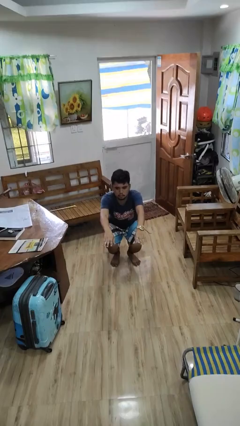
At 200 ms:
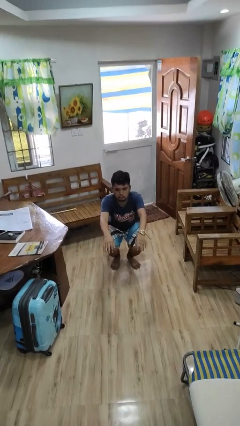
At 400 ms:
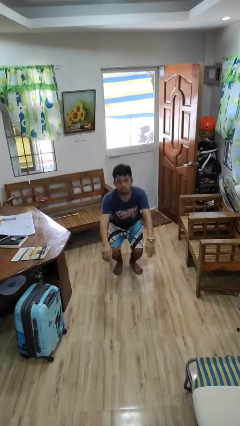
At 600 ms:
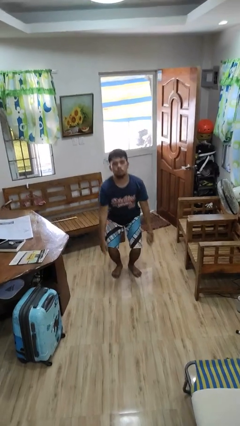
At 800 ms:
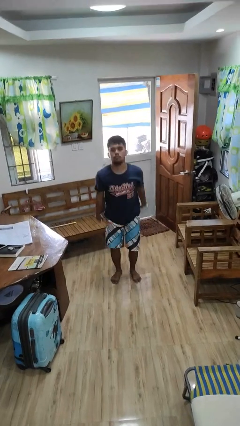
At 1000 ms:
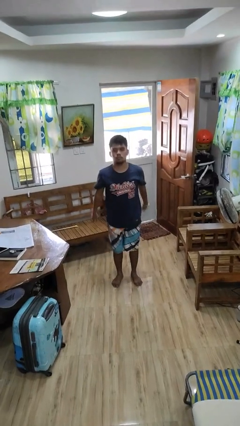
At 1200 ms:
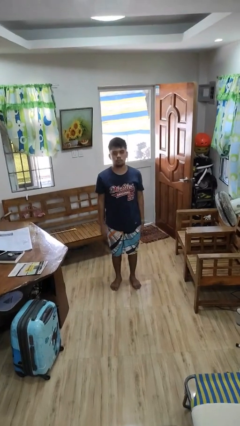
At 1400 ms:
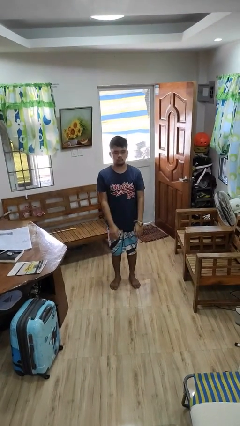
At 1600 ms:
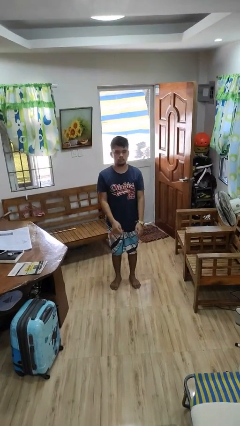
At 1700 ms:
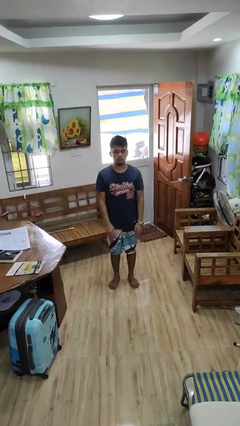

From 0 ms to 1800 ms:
person stands up

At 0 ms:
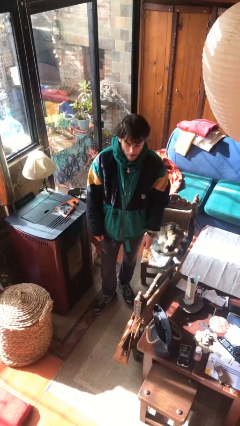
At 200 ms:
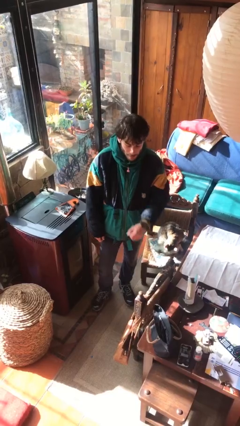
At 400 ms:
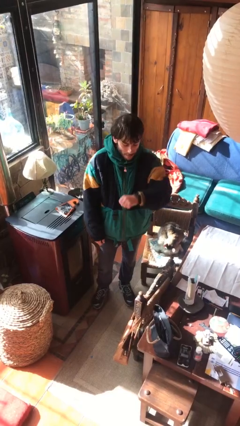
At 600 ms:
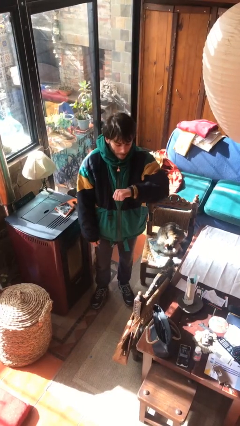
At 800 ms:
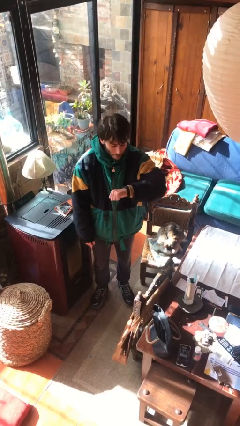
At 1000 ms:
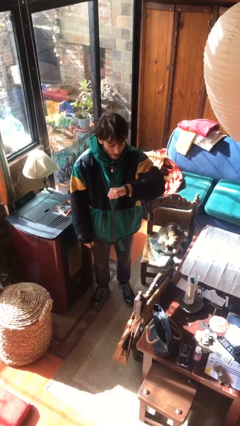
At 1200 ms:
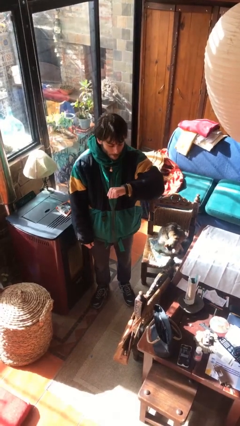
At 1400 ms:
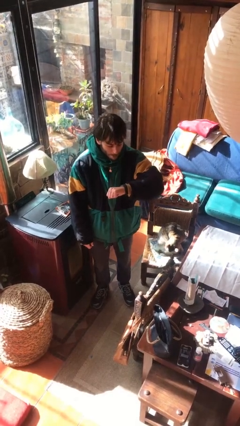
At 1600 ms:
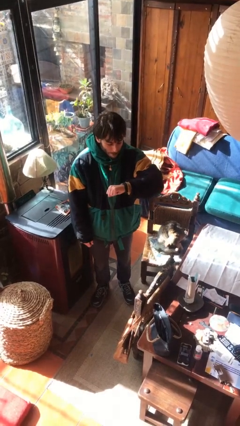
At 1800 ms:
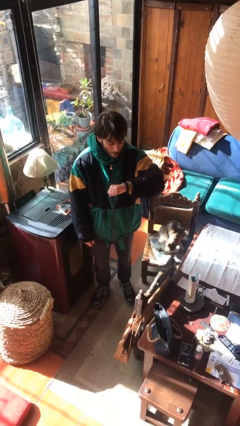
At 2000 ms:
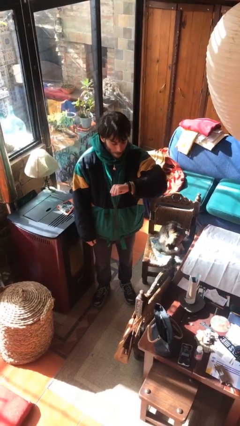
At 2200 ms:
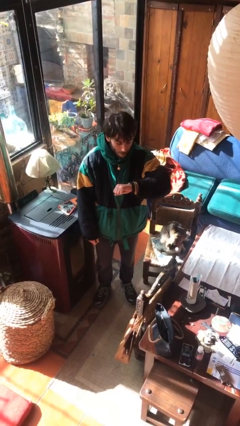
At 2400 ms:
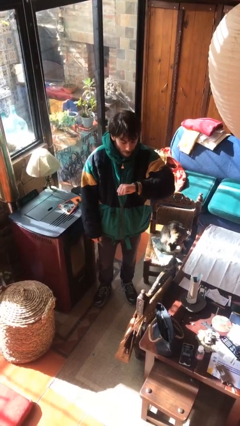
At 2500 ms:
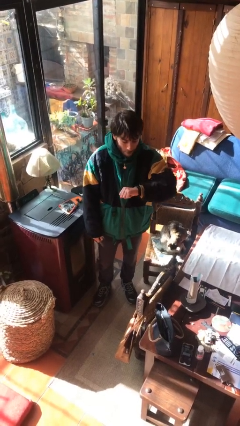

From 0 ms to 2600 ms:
person looks at wristwatch

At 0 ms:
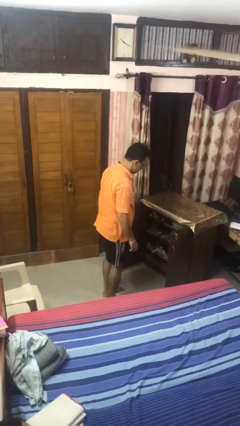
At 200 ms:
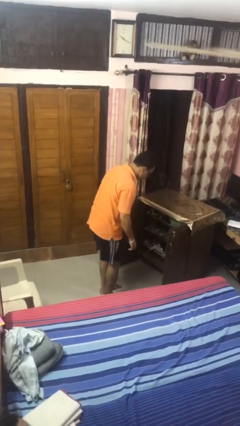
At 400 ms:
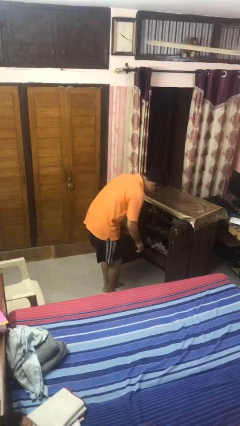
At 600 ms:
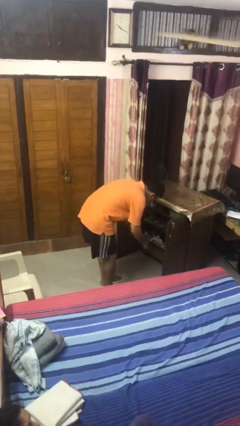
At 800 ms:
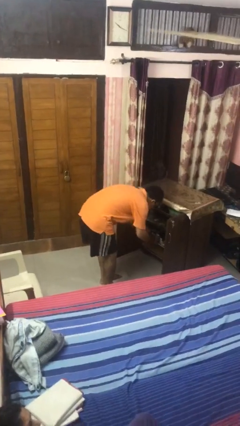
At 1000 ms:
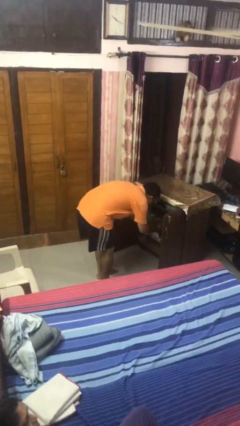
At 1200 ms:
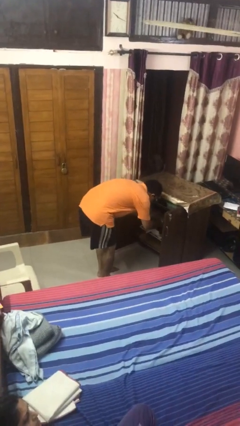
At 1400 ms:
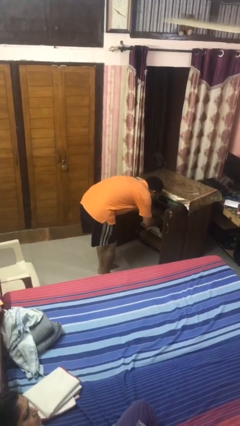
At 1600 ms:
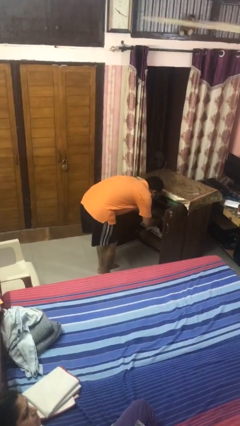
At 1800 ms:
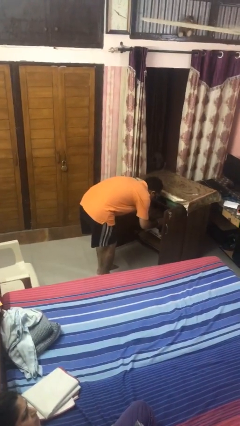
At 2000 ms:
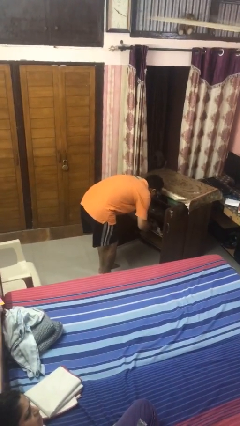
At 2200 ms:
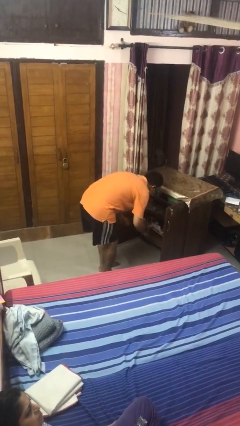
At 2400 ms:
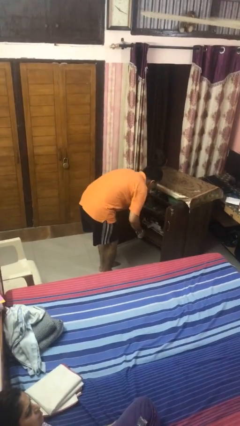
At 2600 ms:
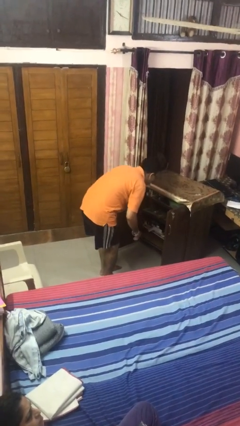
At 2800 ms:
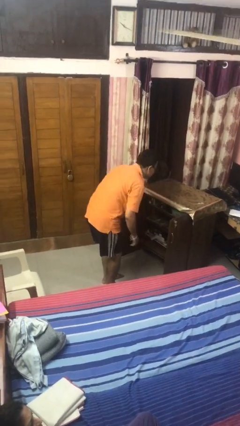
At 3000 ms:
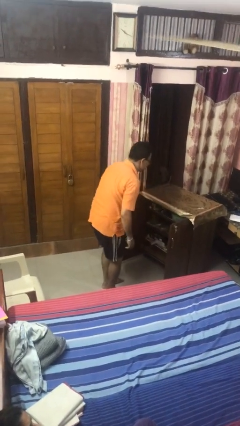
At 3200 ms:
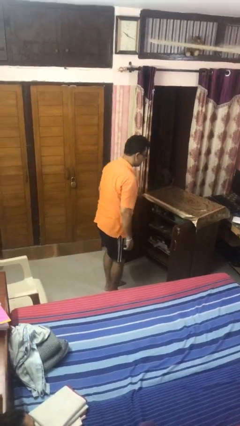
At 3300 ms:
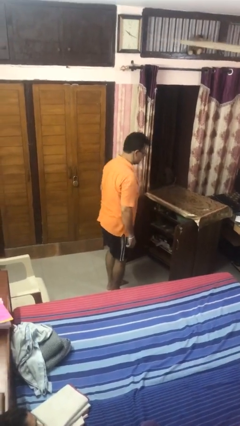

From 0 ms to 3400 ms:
person searches in cabinet

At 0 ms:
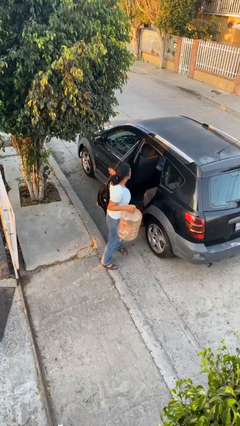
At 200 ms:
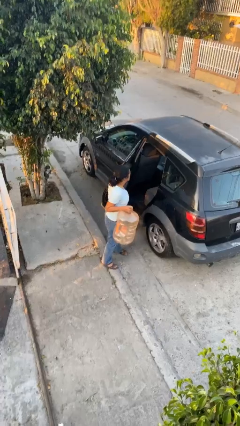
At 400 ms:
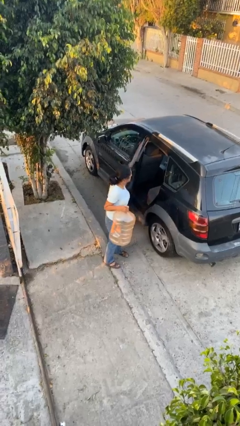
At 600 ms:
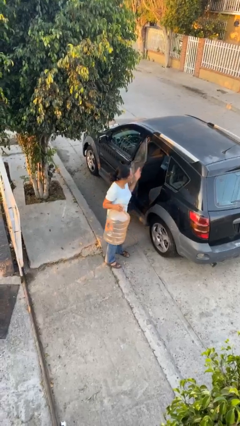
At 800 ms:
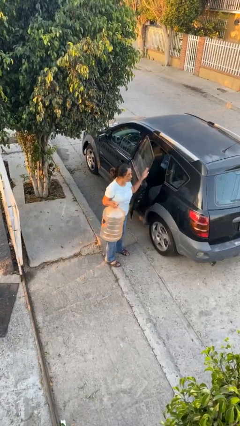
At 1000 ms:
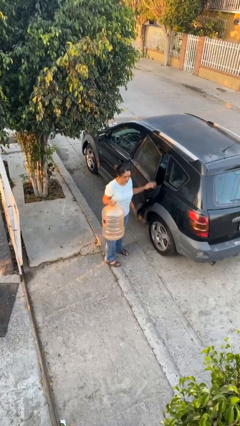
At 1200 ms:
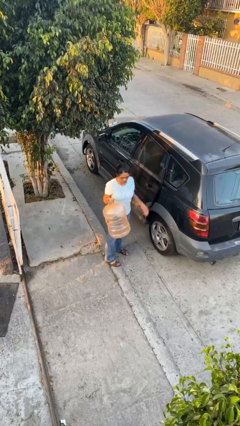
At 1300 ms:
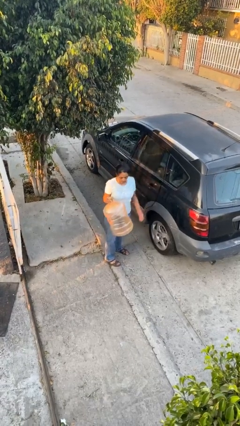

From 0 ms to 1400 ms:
person closes car door

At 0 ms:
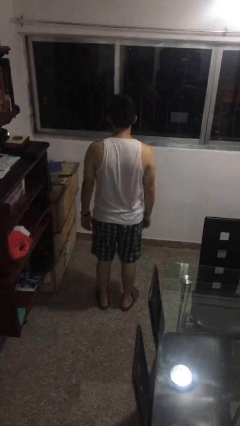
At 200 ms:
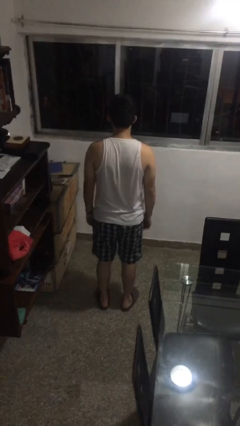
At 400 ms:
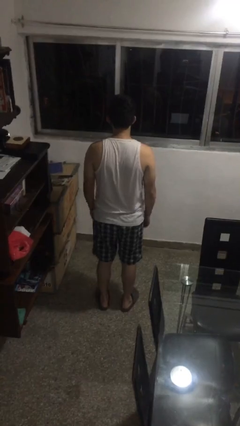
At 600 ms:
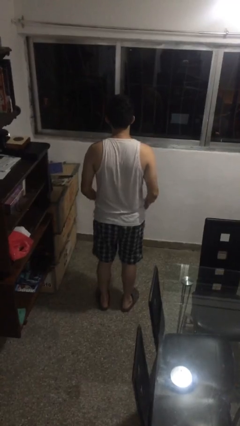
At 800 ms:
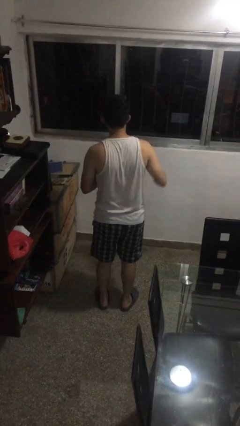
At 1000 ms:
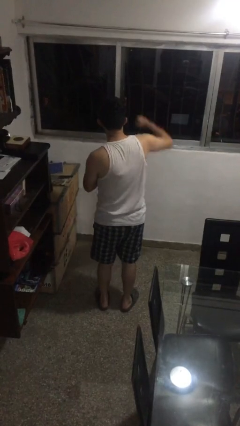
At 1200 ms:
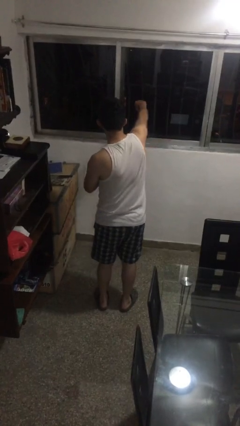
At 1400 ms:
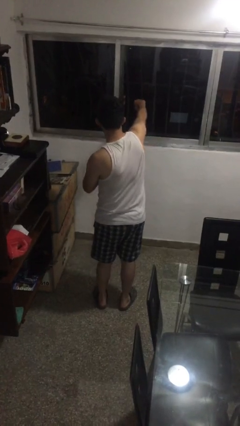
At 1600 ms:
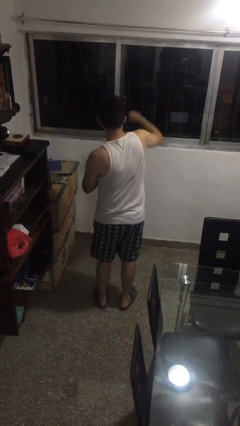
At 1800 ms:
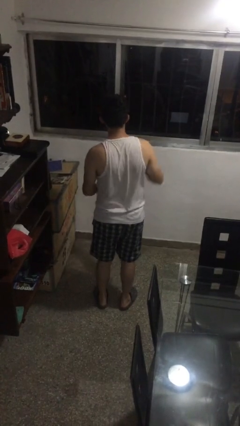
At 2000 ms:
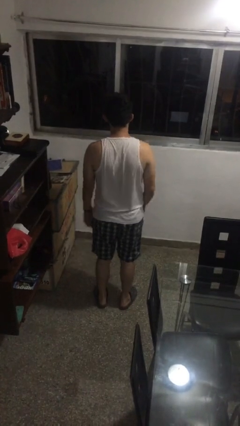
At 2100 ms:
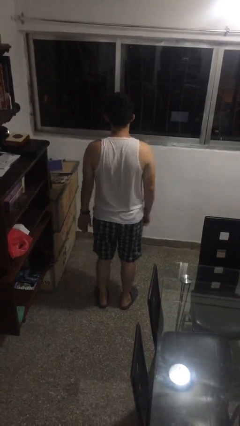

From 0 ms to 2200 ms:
person punches

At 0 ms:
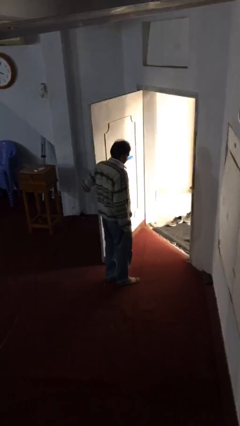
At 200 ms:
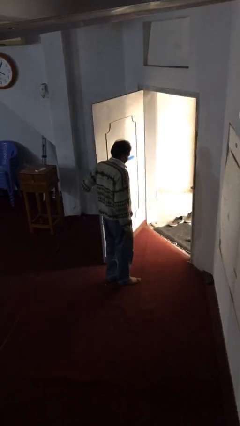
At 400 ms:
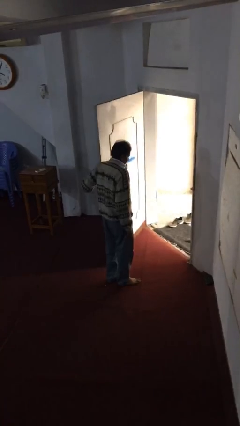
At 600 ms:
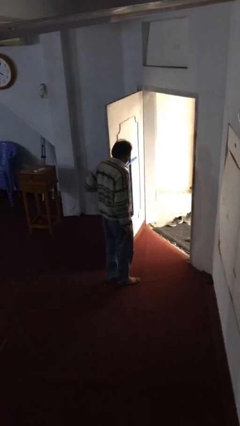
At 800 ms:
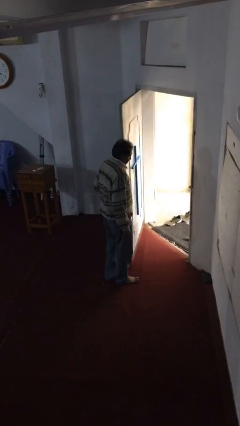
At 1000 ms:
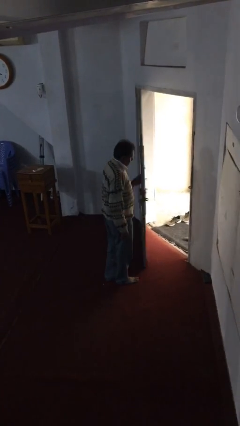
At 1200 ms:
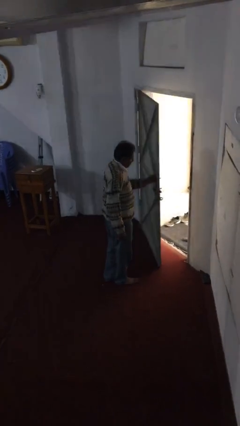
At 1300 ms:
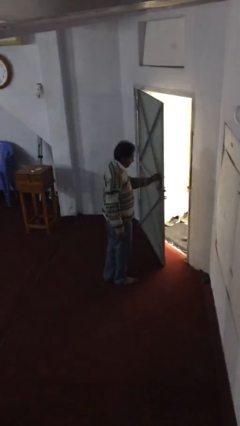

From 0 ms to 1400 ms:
person closes facility door

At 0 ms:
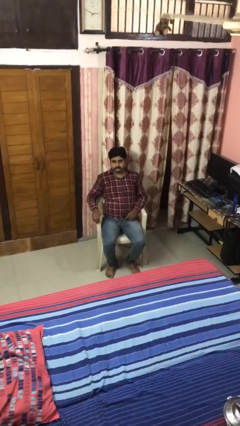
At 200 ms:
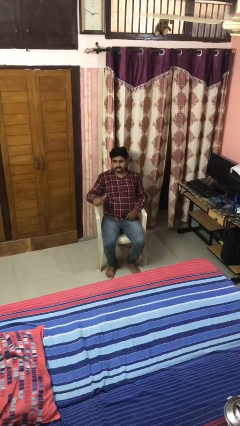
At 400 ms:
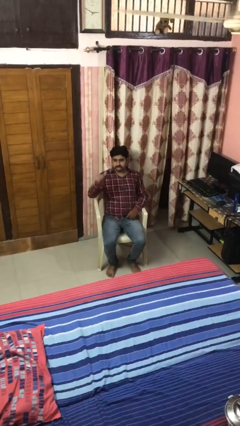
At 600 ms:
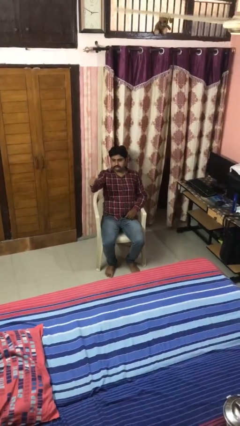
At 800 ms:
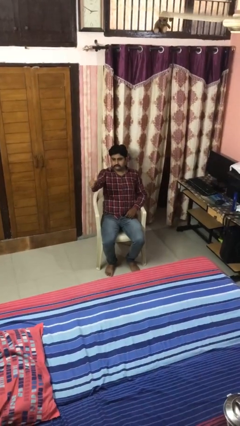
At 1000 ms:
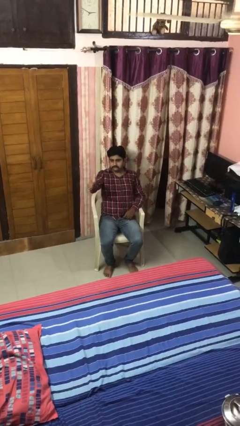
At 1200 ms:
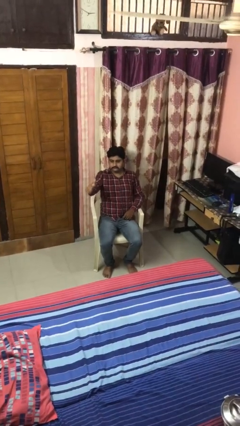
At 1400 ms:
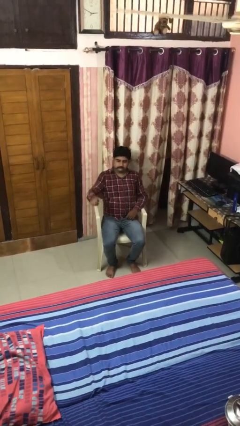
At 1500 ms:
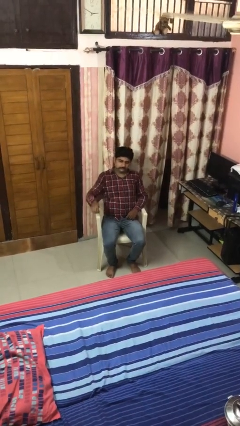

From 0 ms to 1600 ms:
person gestures thumbs up

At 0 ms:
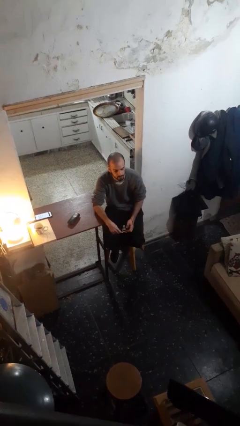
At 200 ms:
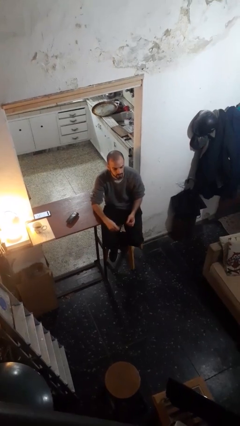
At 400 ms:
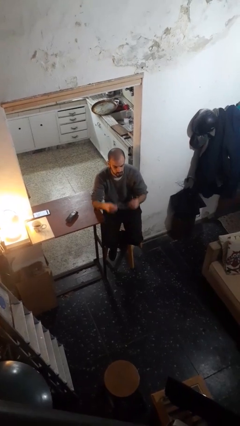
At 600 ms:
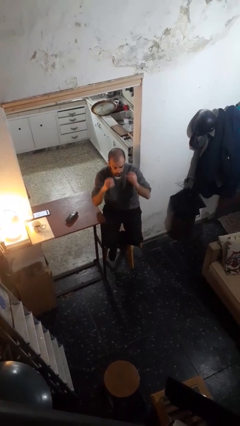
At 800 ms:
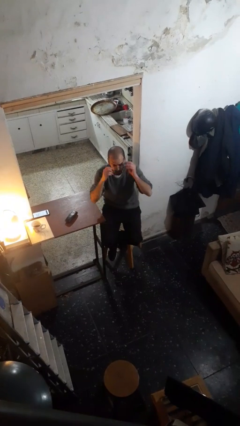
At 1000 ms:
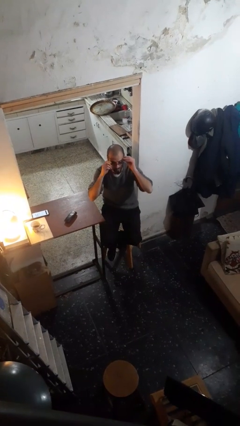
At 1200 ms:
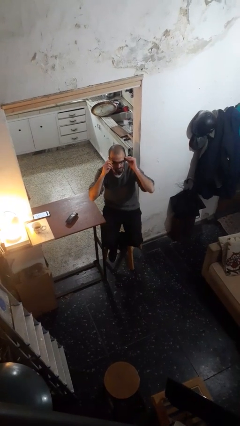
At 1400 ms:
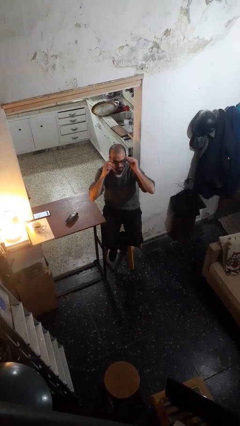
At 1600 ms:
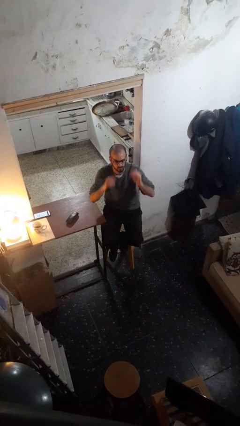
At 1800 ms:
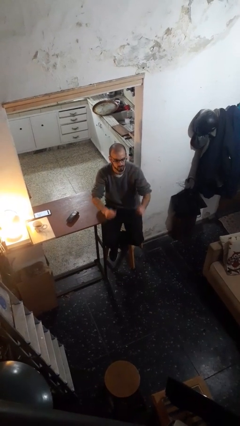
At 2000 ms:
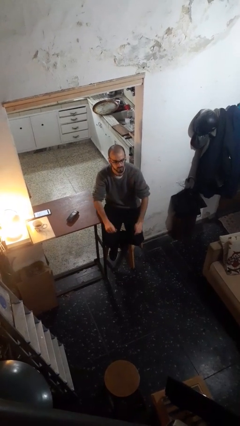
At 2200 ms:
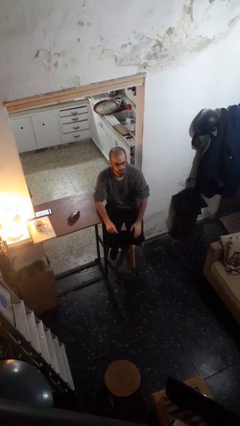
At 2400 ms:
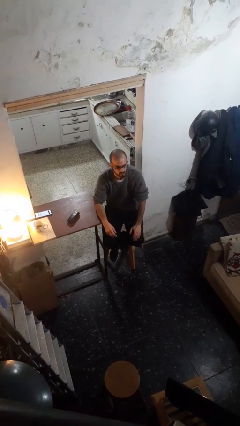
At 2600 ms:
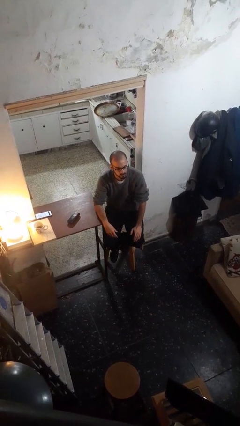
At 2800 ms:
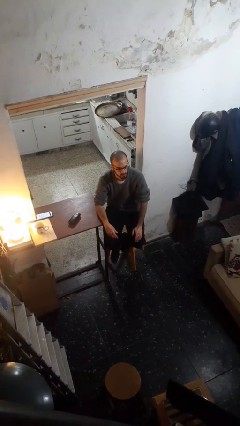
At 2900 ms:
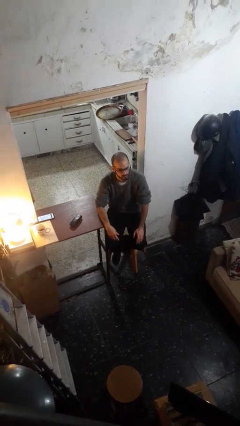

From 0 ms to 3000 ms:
person puts on glasses
